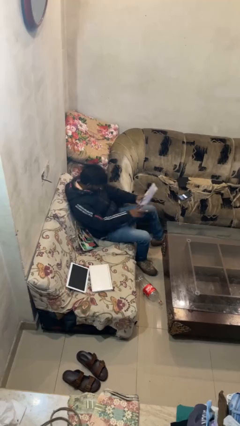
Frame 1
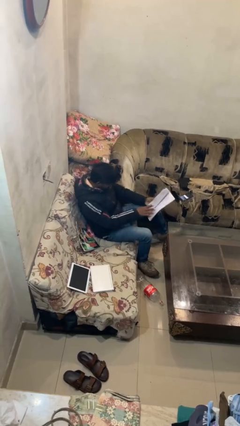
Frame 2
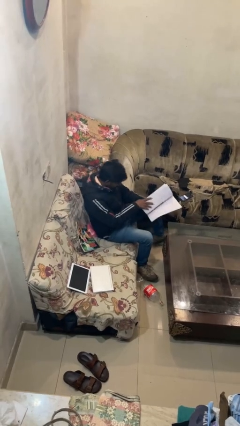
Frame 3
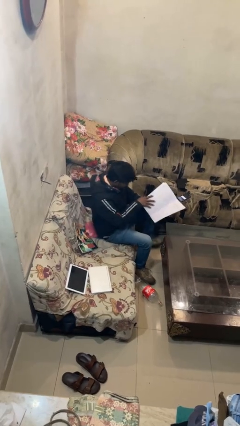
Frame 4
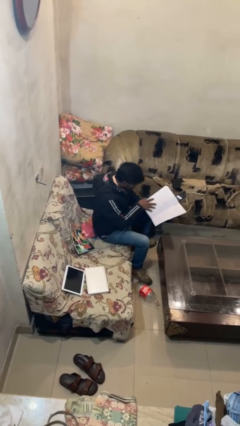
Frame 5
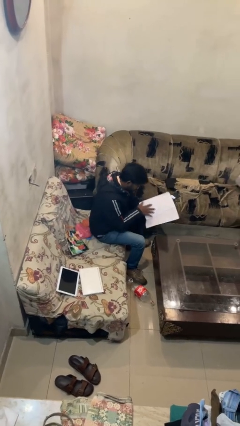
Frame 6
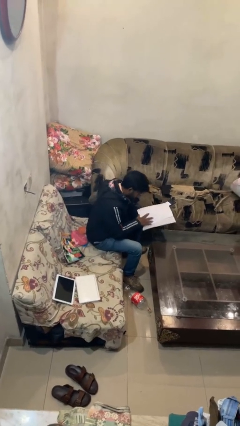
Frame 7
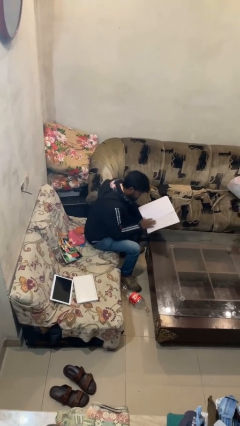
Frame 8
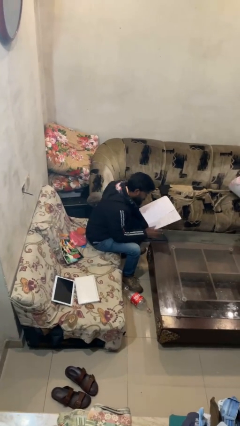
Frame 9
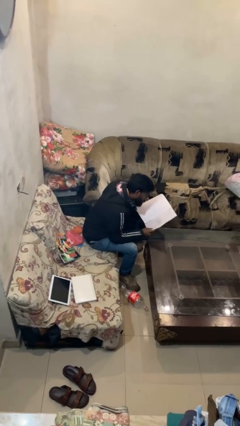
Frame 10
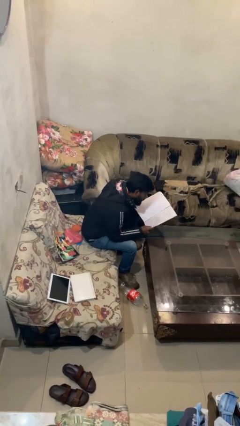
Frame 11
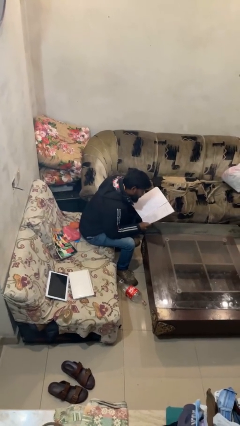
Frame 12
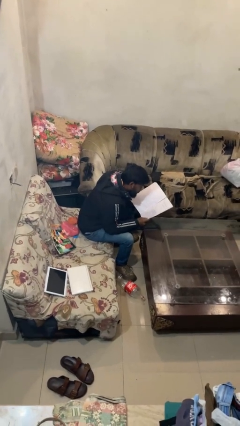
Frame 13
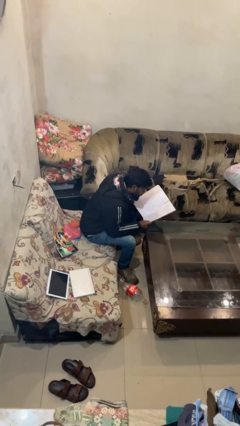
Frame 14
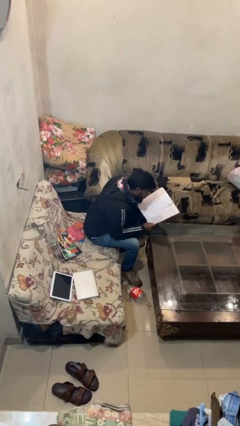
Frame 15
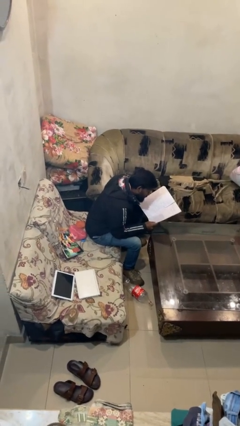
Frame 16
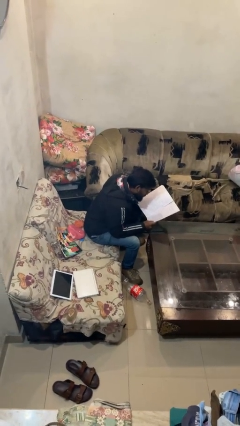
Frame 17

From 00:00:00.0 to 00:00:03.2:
person reads document

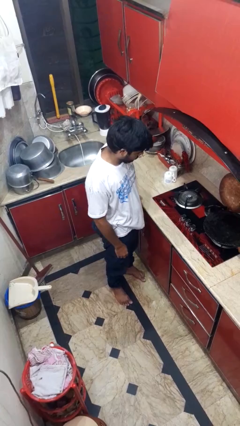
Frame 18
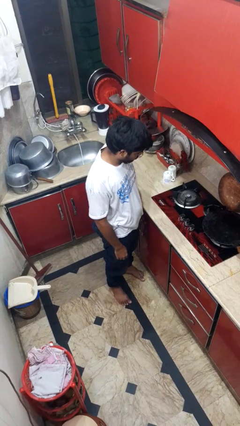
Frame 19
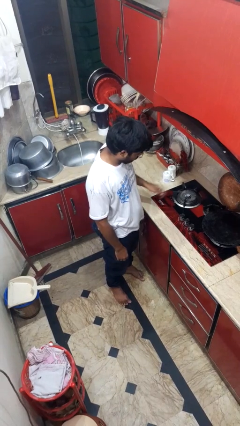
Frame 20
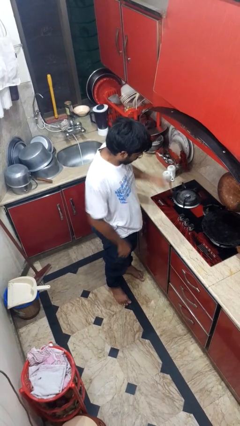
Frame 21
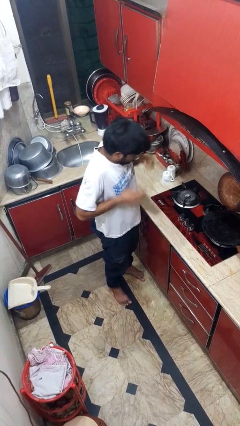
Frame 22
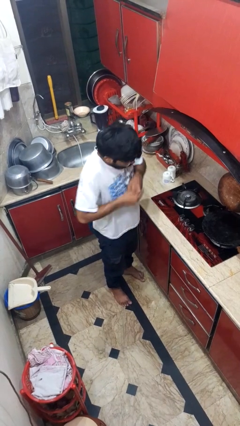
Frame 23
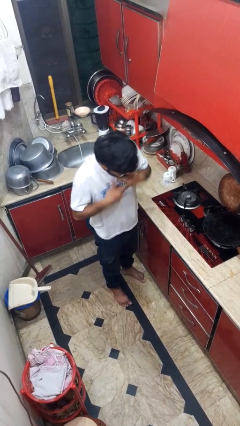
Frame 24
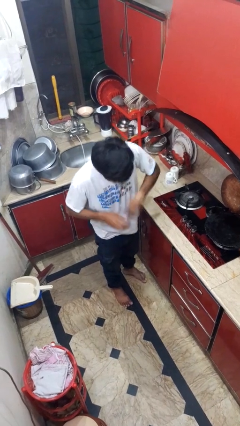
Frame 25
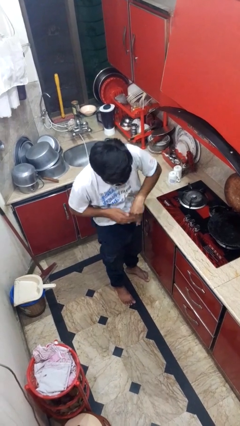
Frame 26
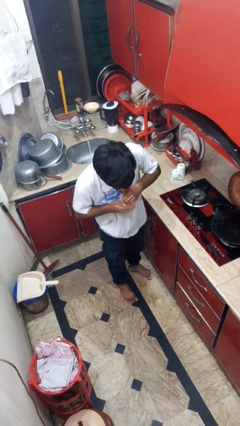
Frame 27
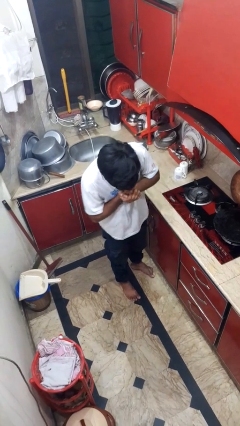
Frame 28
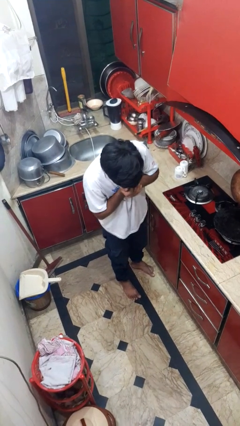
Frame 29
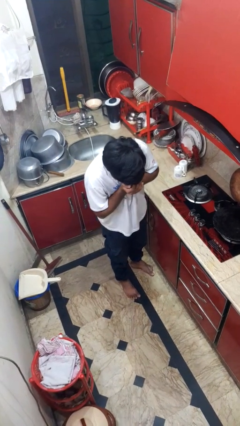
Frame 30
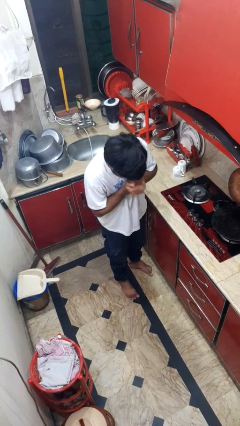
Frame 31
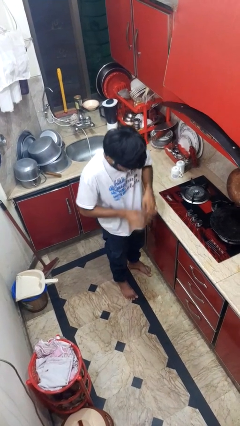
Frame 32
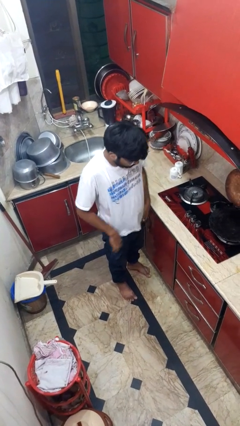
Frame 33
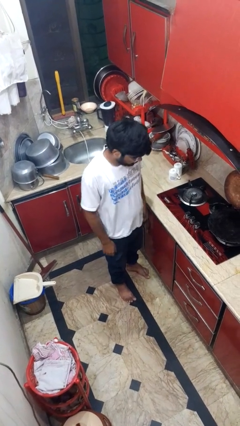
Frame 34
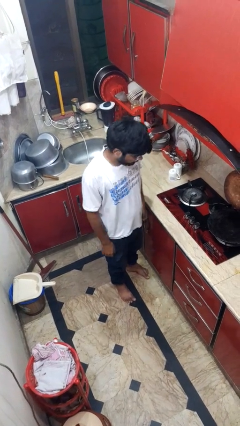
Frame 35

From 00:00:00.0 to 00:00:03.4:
person burns hand

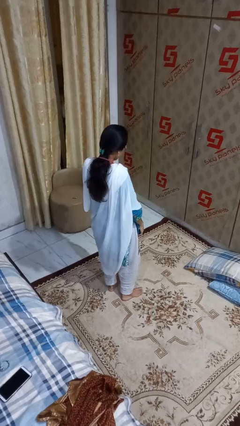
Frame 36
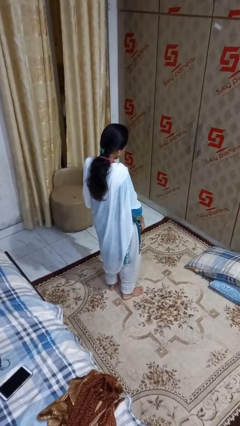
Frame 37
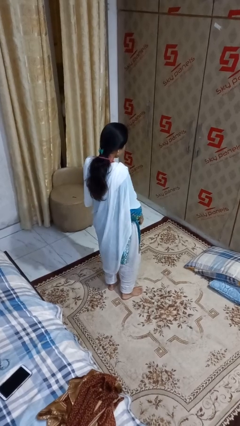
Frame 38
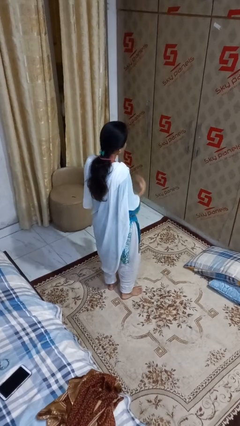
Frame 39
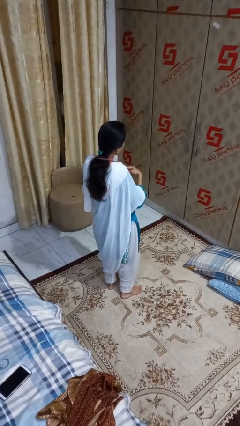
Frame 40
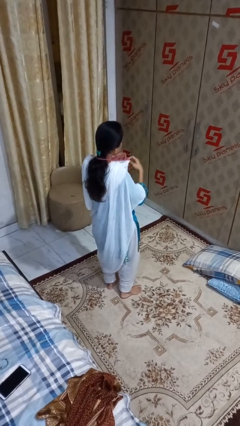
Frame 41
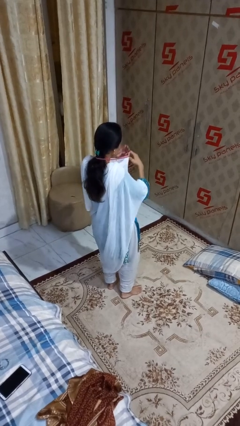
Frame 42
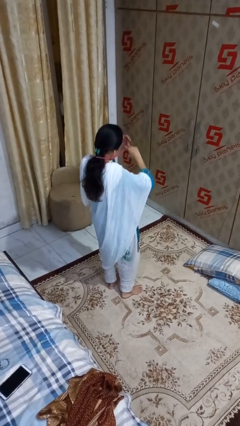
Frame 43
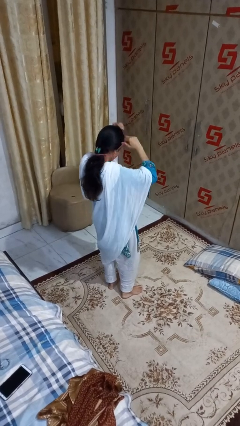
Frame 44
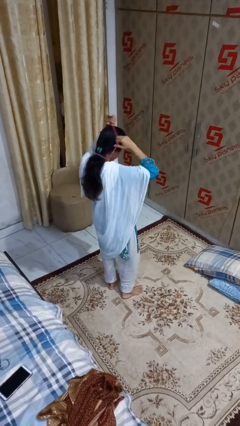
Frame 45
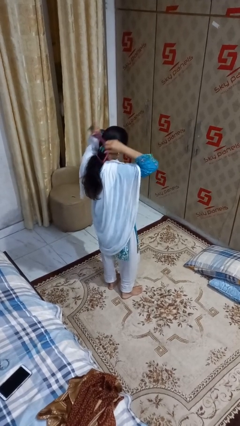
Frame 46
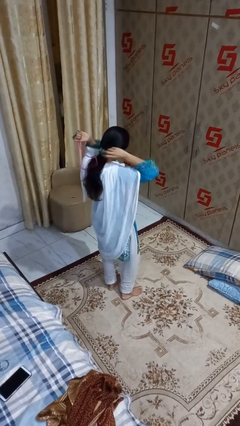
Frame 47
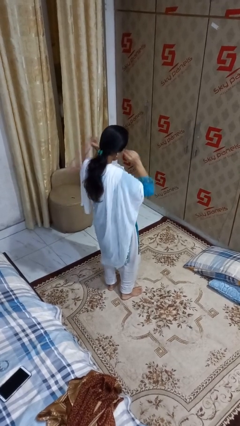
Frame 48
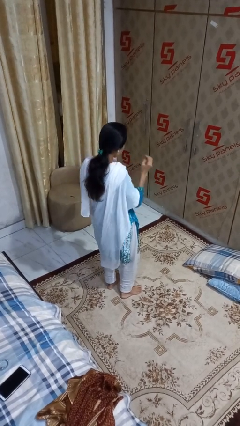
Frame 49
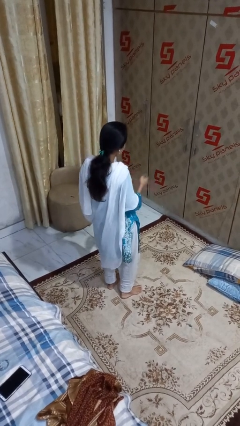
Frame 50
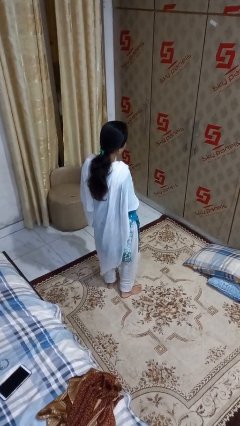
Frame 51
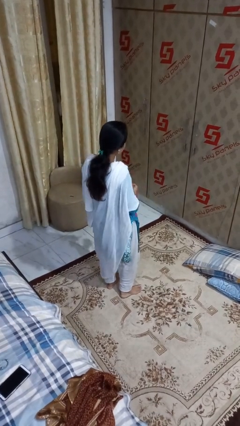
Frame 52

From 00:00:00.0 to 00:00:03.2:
person takes off necklace

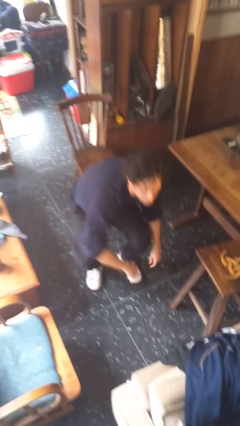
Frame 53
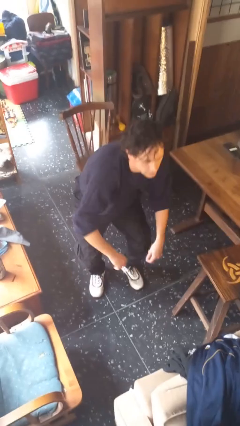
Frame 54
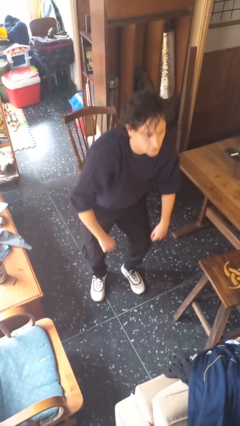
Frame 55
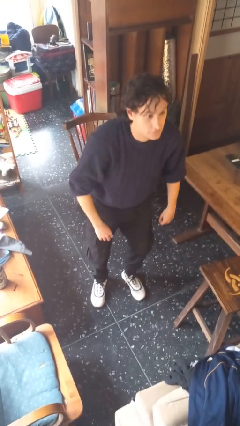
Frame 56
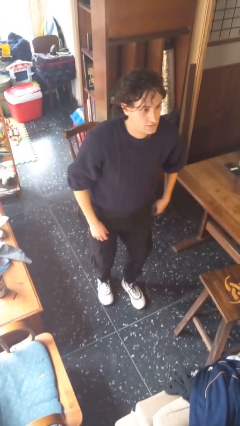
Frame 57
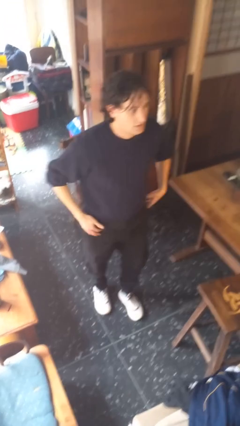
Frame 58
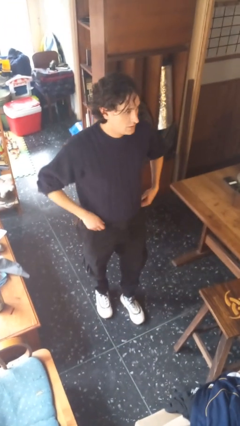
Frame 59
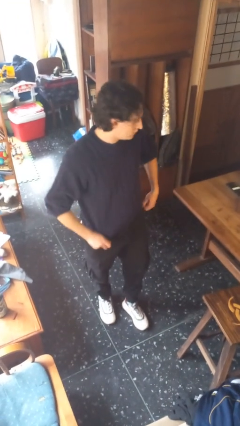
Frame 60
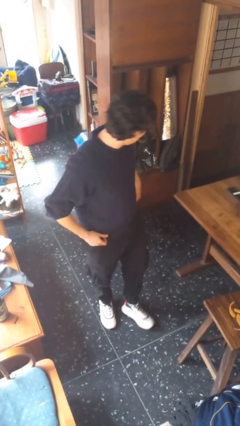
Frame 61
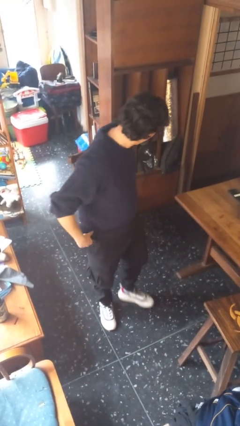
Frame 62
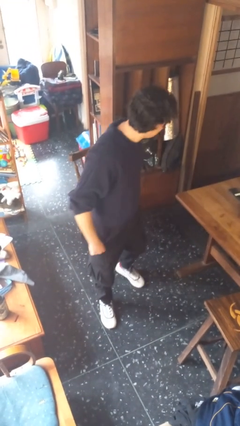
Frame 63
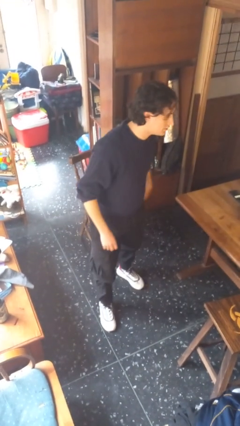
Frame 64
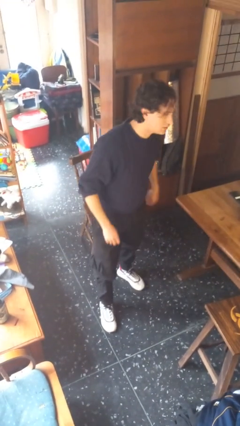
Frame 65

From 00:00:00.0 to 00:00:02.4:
person stands up from floor

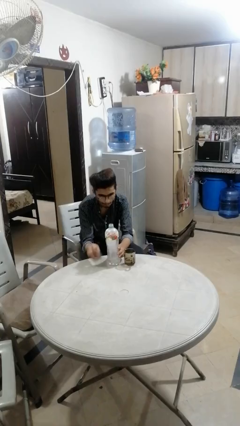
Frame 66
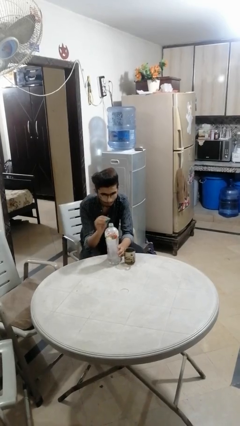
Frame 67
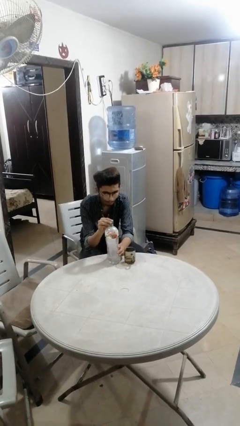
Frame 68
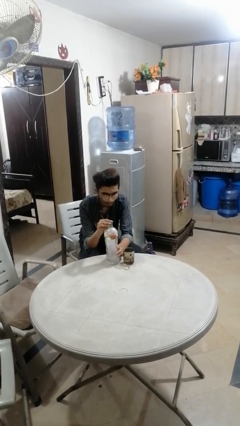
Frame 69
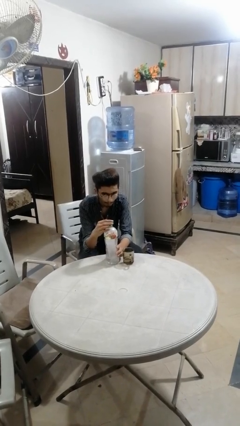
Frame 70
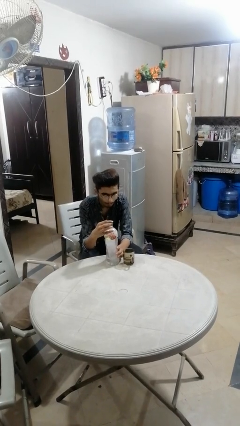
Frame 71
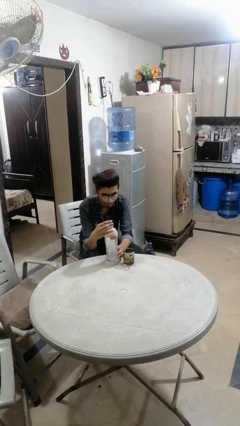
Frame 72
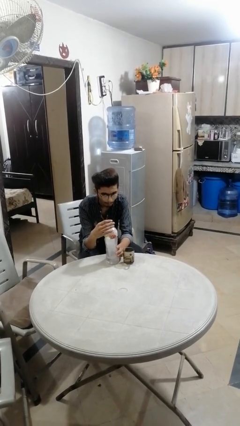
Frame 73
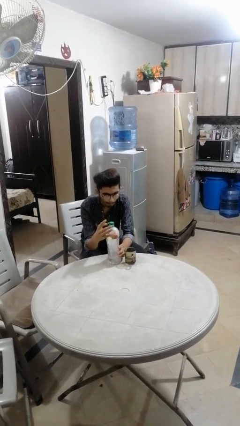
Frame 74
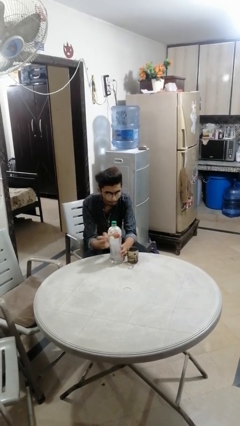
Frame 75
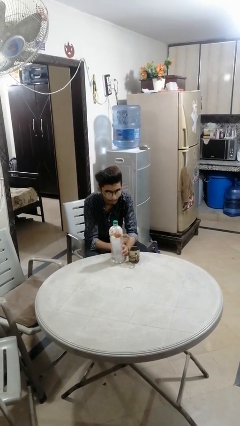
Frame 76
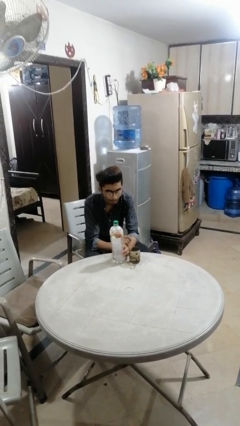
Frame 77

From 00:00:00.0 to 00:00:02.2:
person screws lid to bottle

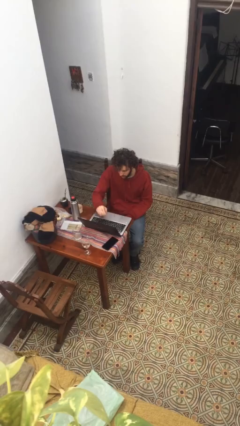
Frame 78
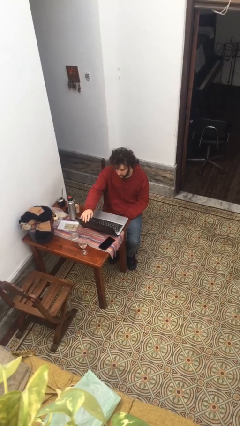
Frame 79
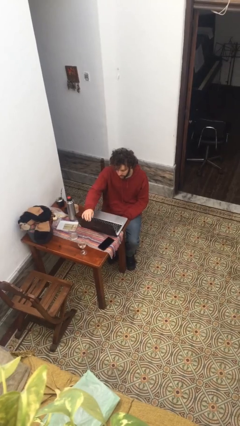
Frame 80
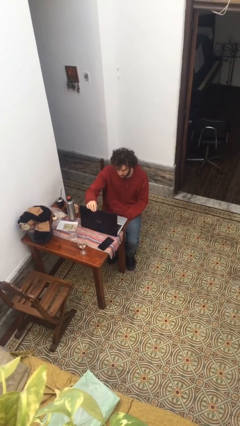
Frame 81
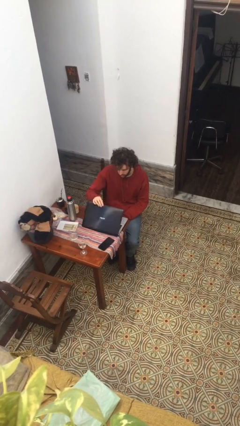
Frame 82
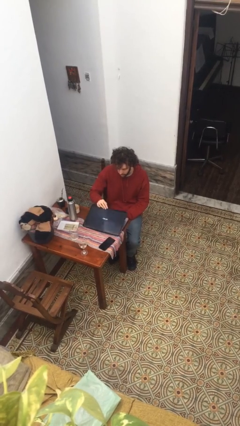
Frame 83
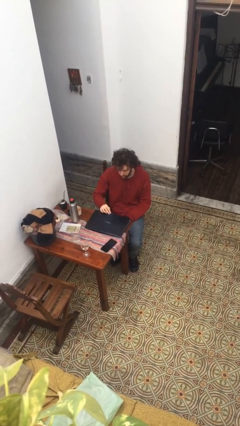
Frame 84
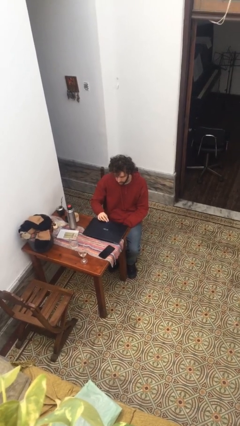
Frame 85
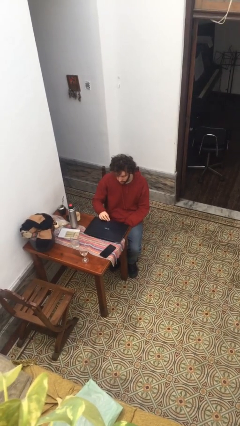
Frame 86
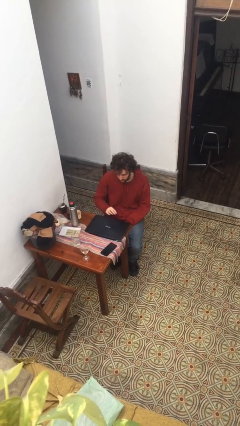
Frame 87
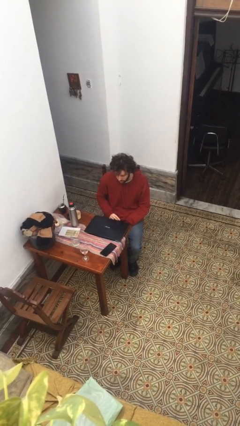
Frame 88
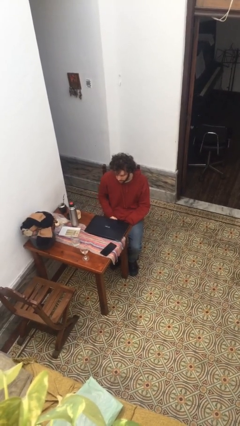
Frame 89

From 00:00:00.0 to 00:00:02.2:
person closes laptop

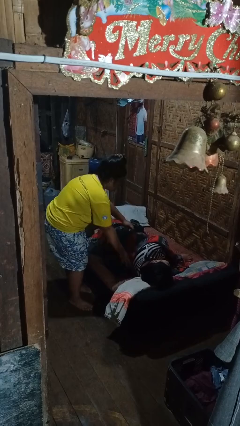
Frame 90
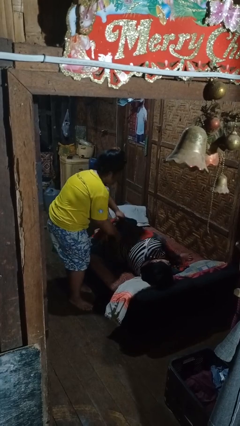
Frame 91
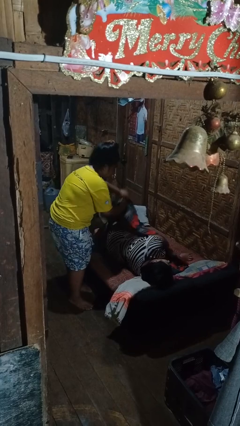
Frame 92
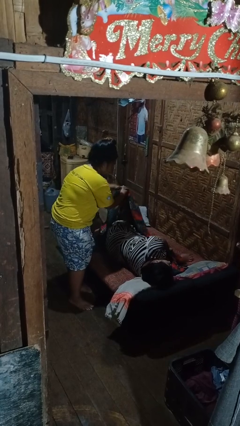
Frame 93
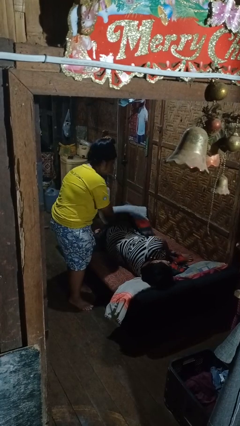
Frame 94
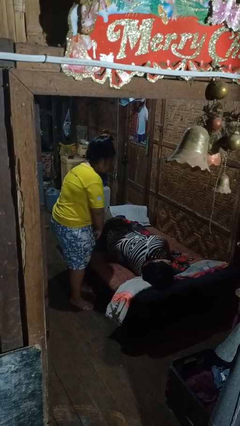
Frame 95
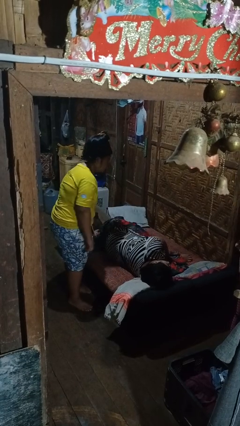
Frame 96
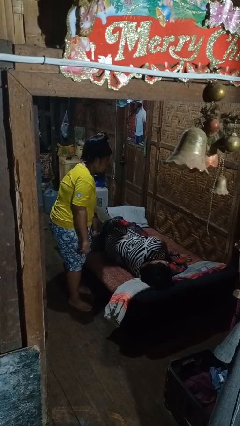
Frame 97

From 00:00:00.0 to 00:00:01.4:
person uncovers friend with blanket
